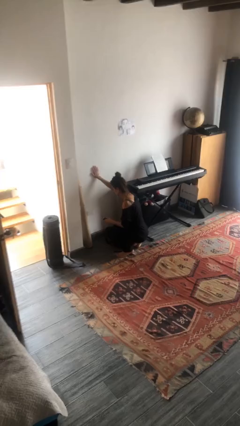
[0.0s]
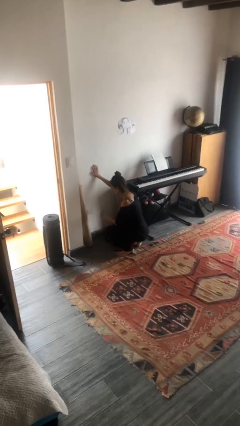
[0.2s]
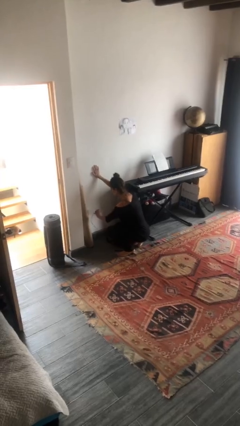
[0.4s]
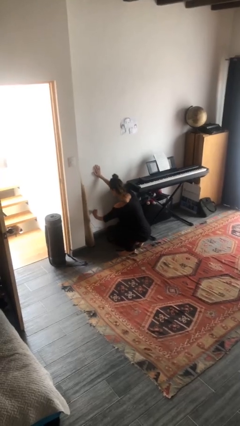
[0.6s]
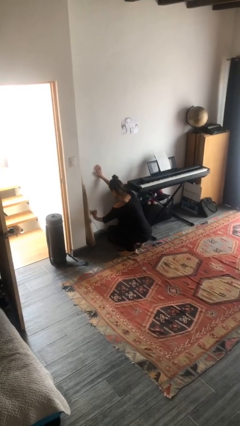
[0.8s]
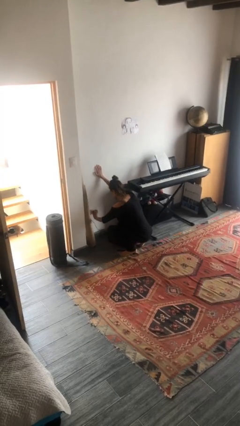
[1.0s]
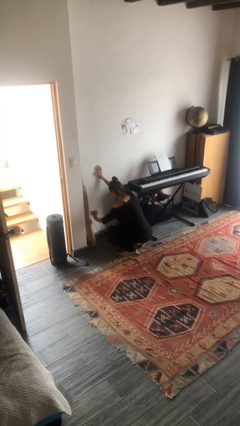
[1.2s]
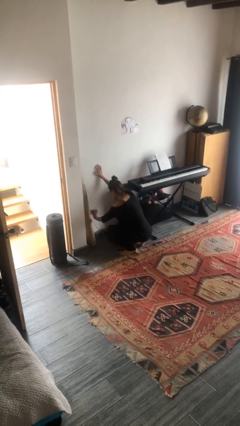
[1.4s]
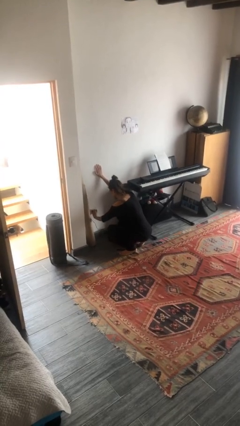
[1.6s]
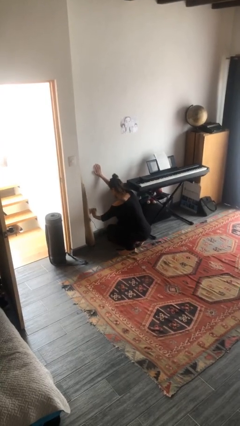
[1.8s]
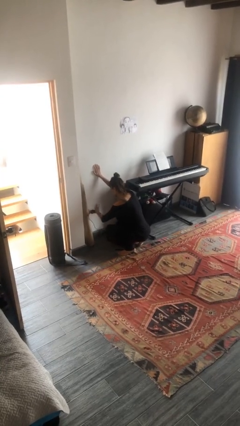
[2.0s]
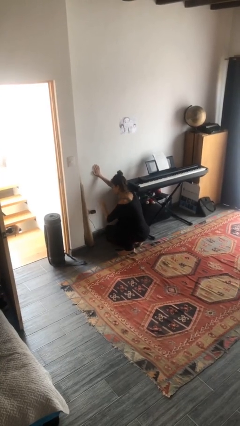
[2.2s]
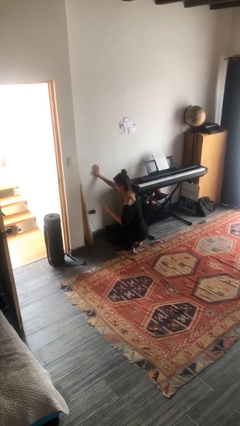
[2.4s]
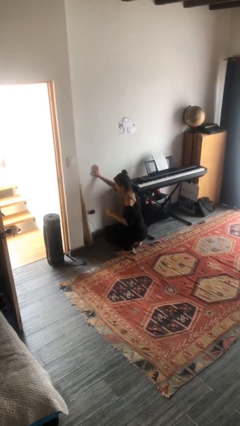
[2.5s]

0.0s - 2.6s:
person plugs into electrical socket

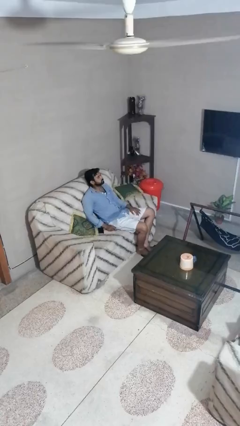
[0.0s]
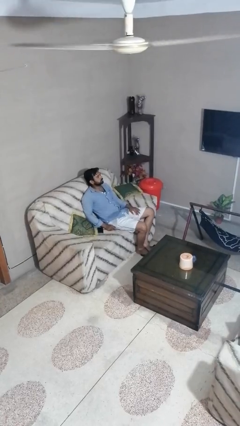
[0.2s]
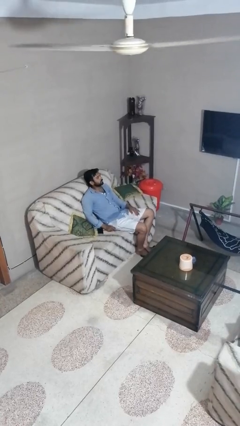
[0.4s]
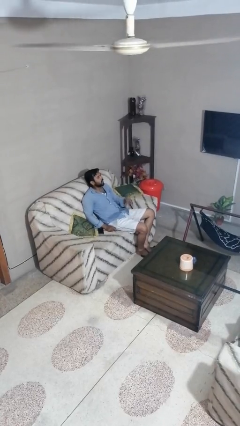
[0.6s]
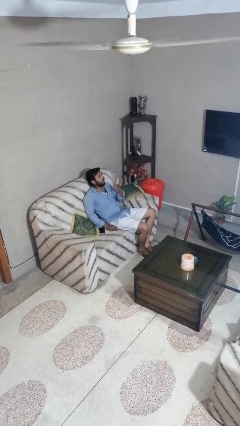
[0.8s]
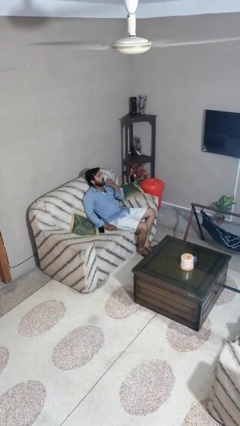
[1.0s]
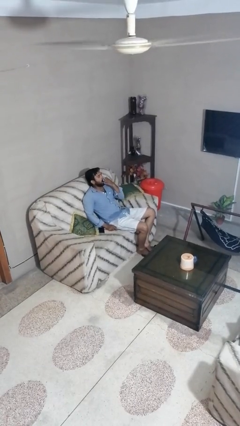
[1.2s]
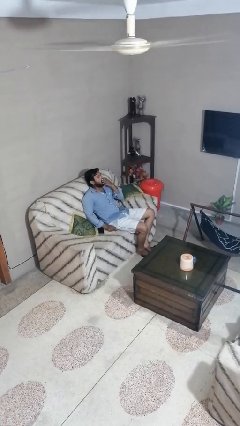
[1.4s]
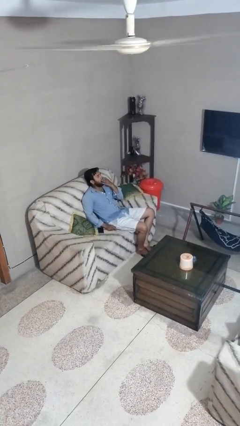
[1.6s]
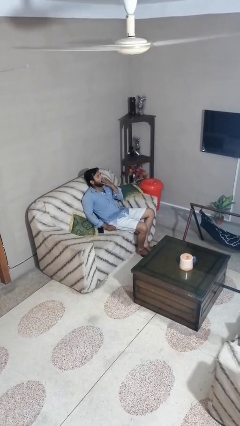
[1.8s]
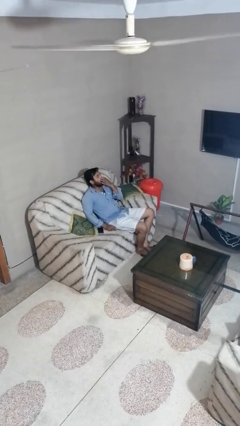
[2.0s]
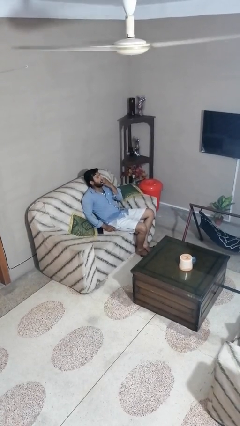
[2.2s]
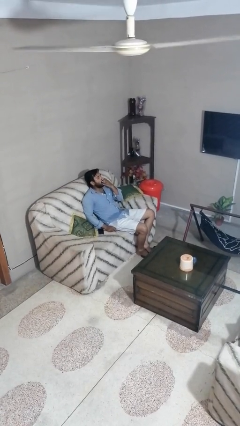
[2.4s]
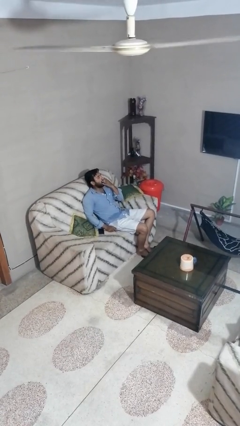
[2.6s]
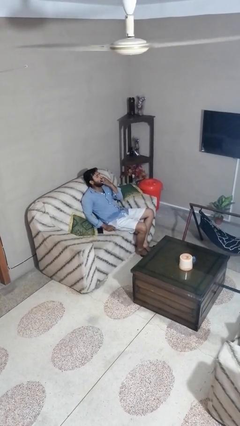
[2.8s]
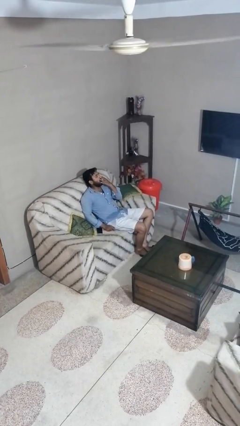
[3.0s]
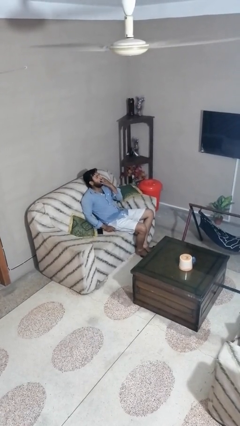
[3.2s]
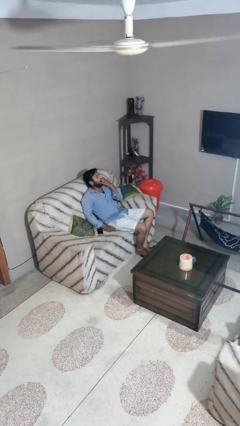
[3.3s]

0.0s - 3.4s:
person yawns

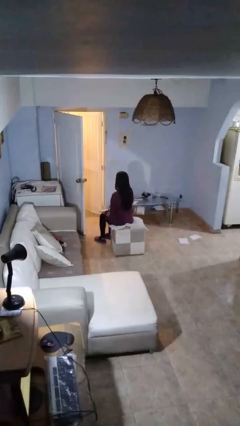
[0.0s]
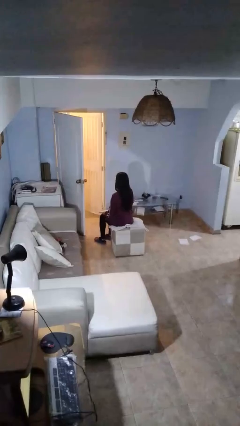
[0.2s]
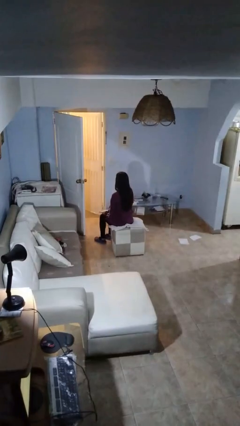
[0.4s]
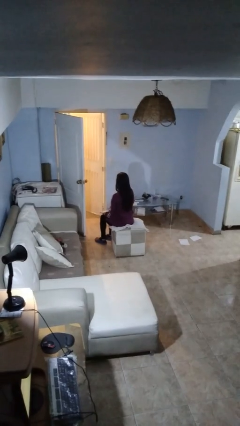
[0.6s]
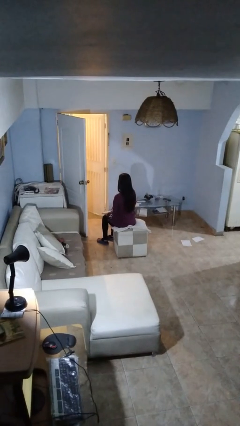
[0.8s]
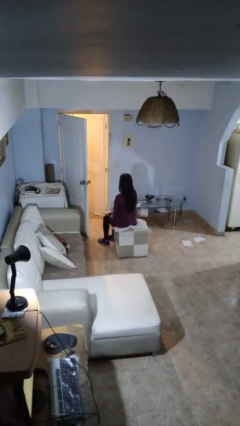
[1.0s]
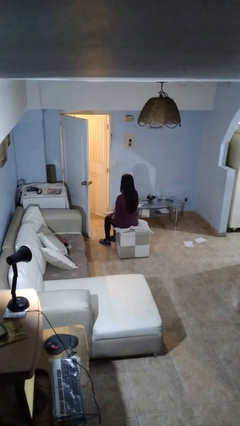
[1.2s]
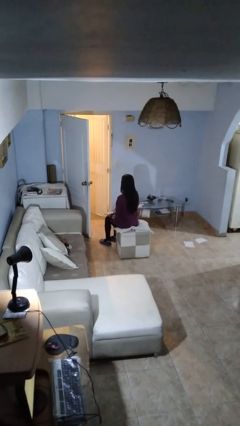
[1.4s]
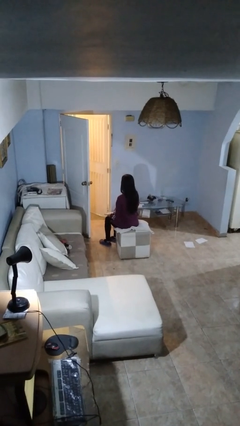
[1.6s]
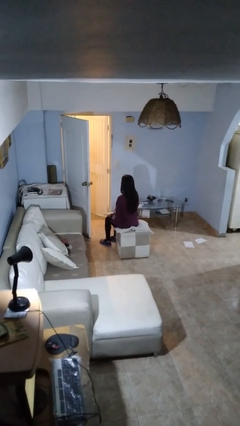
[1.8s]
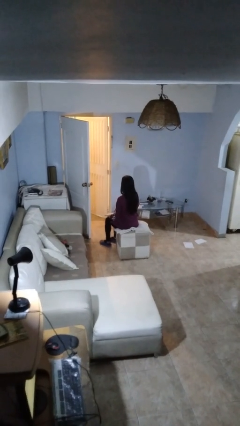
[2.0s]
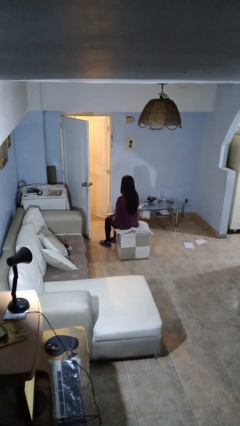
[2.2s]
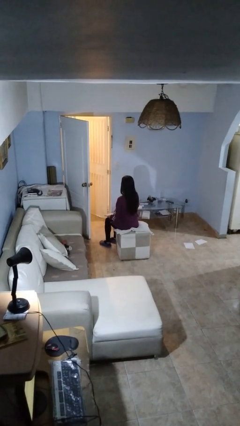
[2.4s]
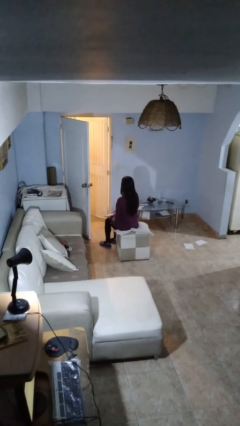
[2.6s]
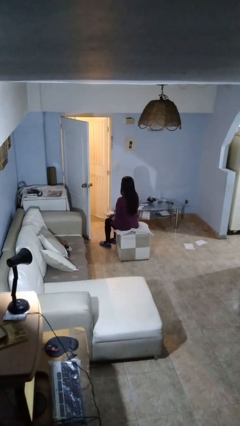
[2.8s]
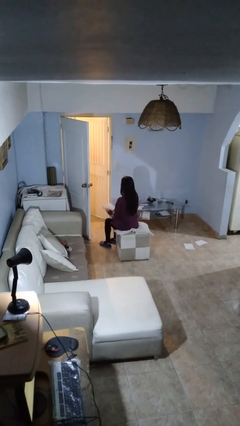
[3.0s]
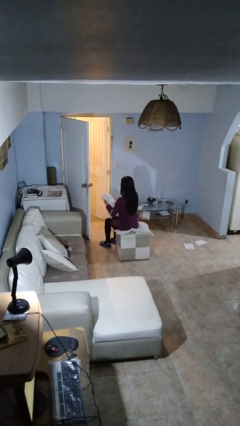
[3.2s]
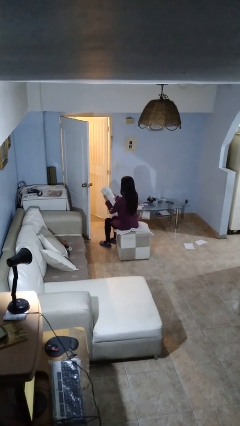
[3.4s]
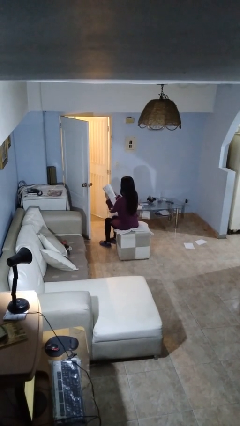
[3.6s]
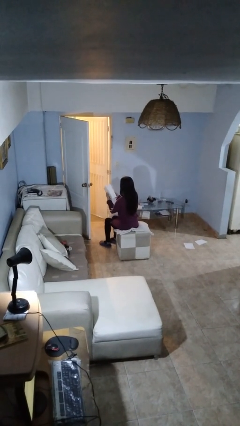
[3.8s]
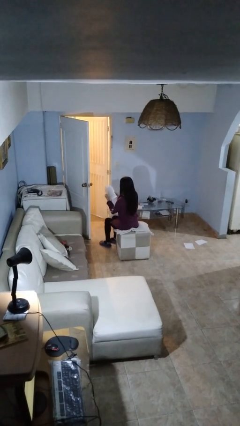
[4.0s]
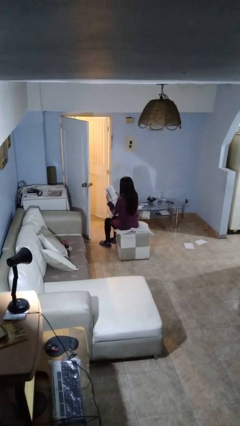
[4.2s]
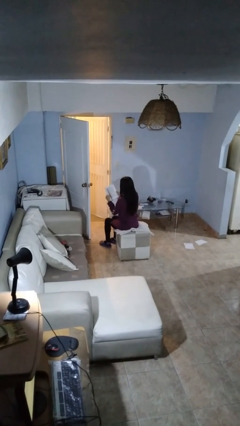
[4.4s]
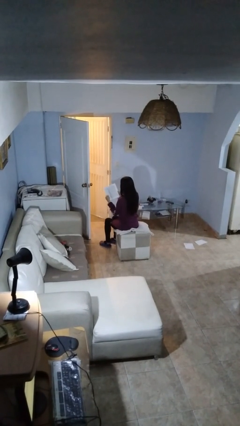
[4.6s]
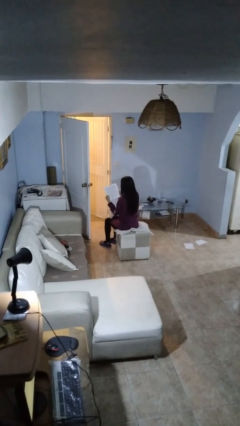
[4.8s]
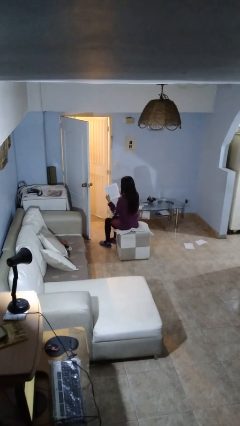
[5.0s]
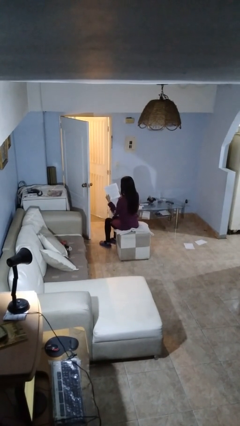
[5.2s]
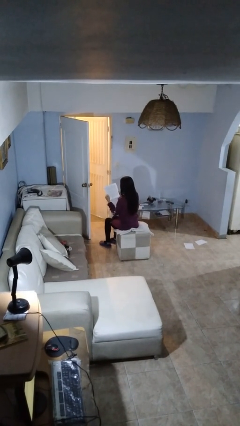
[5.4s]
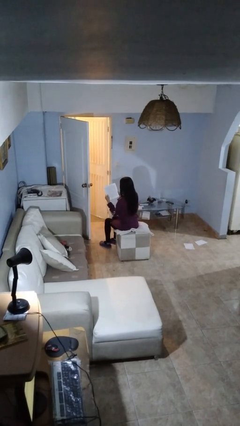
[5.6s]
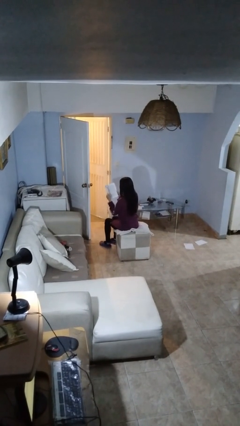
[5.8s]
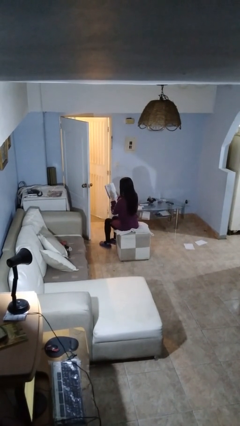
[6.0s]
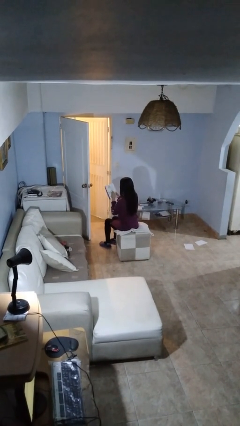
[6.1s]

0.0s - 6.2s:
person reads book

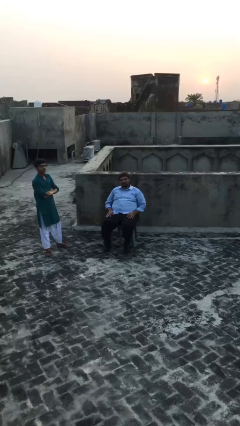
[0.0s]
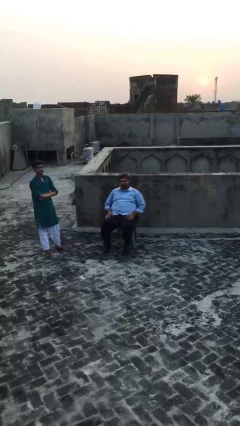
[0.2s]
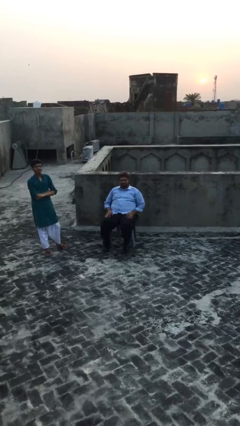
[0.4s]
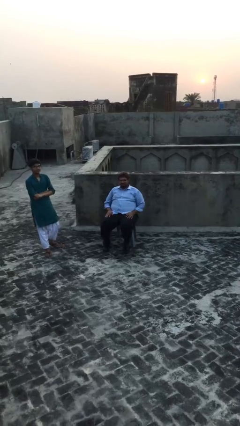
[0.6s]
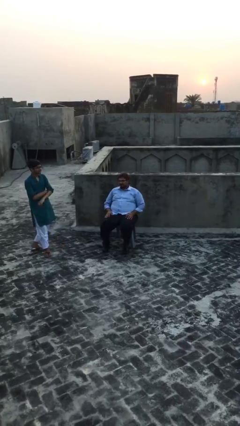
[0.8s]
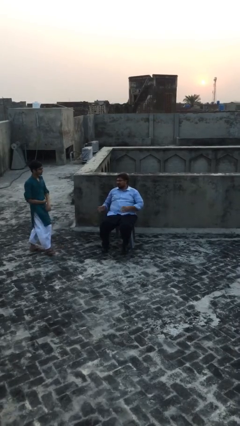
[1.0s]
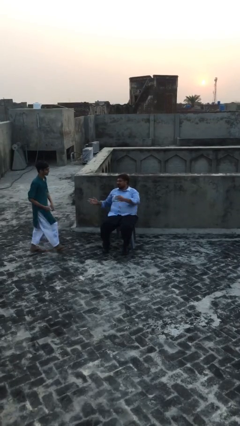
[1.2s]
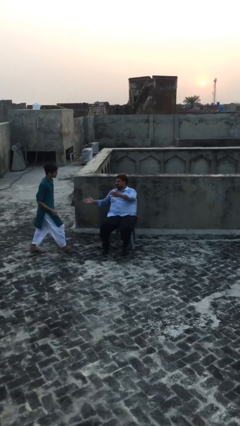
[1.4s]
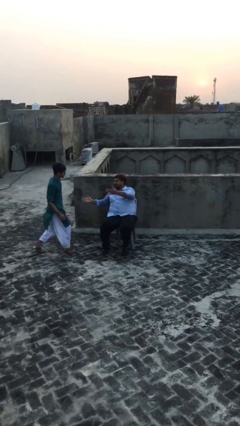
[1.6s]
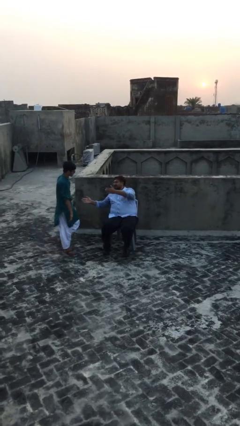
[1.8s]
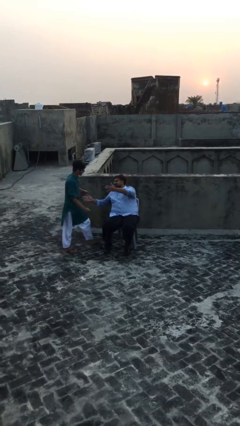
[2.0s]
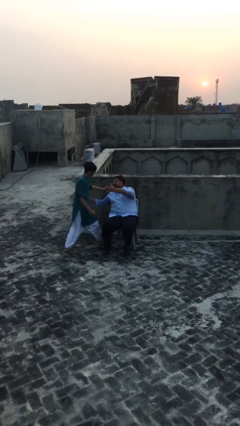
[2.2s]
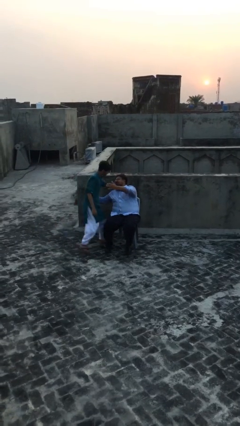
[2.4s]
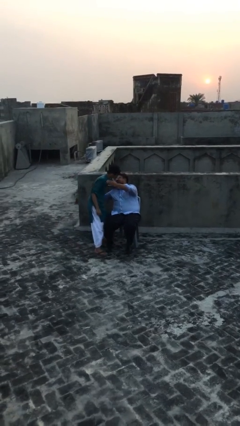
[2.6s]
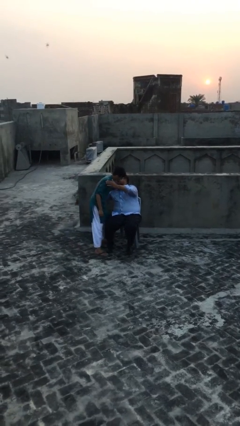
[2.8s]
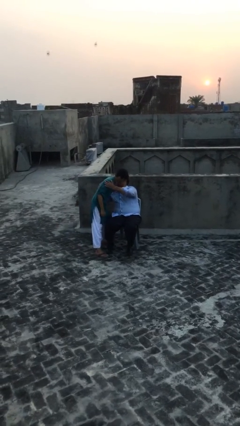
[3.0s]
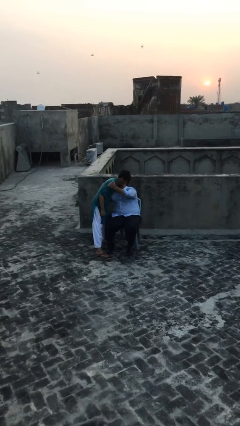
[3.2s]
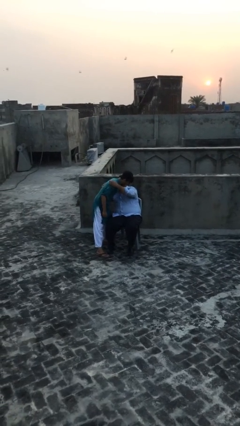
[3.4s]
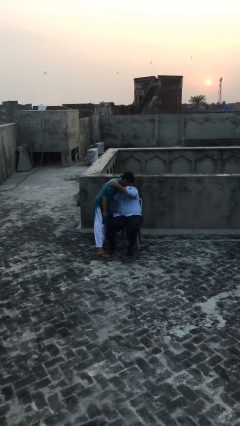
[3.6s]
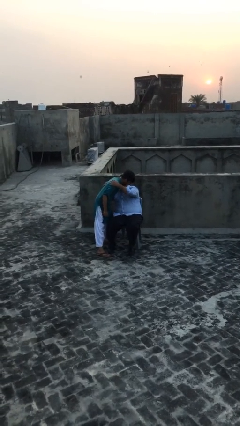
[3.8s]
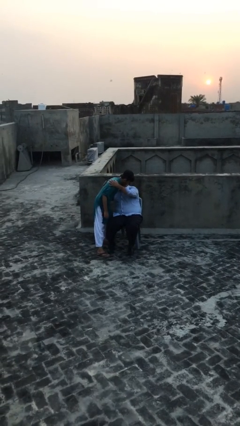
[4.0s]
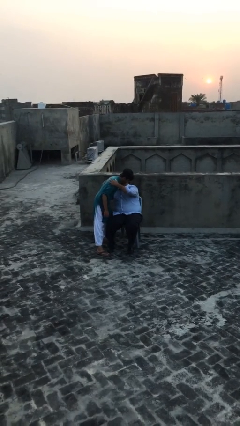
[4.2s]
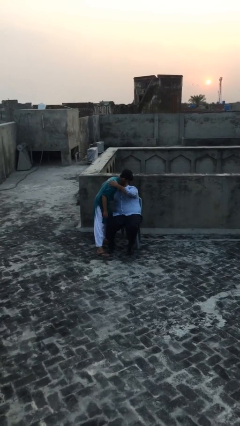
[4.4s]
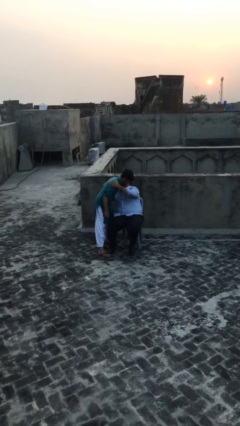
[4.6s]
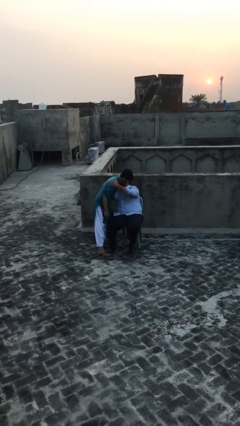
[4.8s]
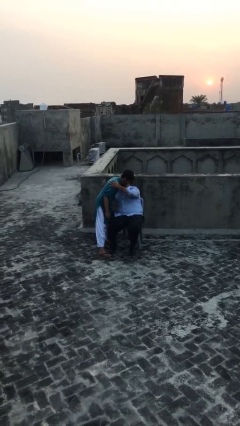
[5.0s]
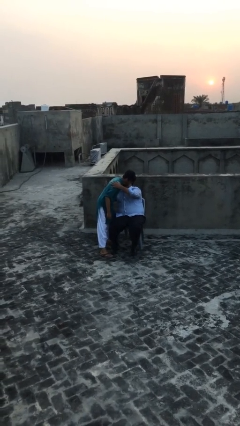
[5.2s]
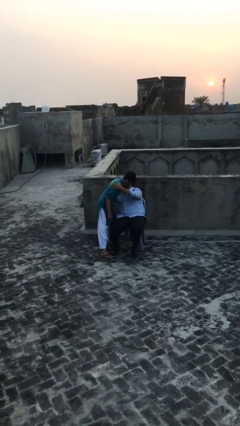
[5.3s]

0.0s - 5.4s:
person embraces person

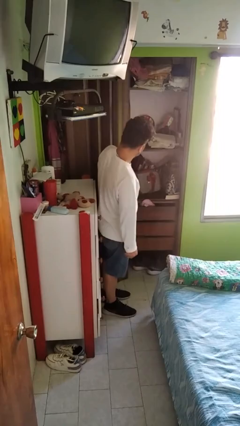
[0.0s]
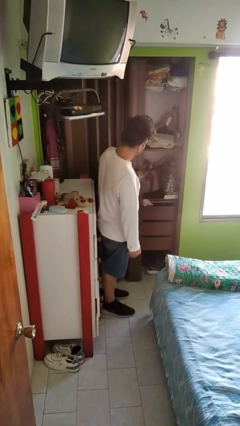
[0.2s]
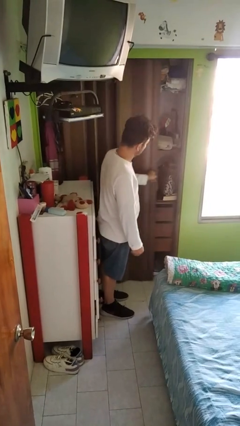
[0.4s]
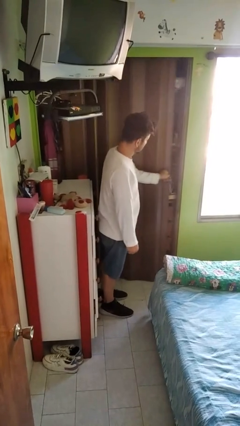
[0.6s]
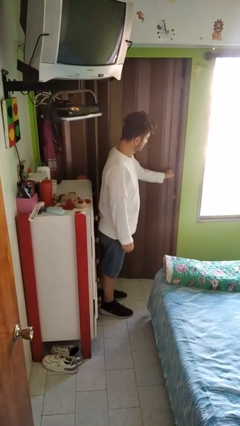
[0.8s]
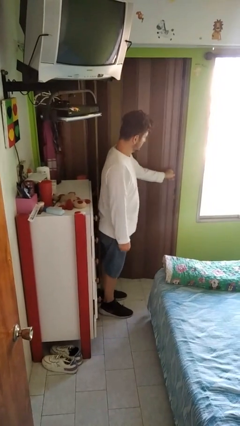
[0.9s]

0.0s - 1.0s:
person closes sliding door
